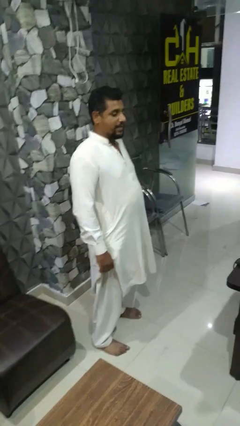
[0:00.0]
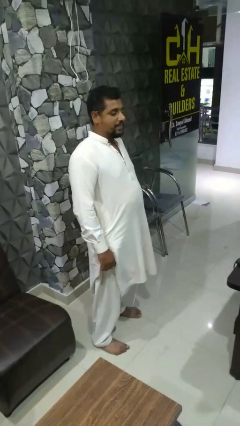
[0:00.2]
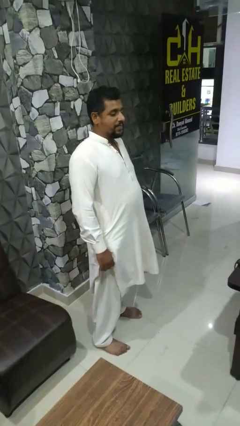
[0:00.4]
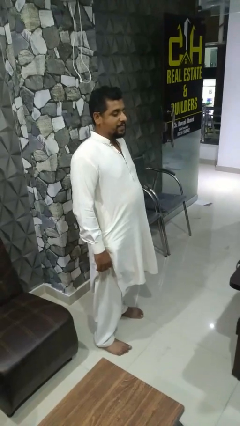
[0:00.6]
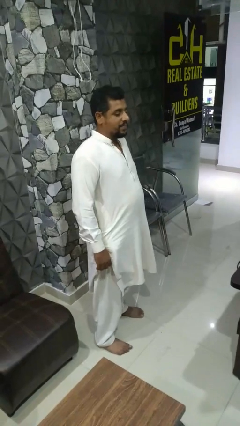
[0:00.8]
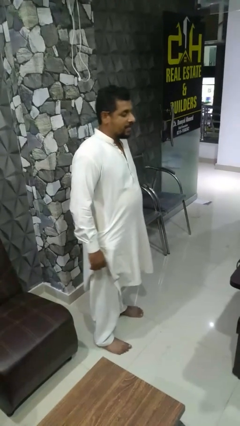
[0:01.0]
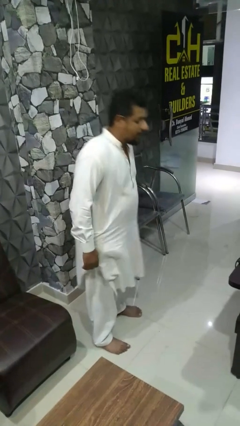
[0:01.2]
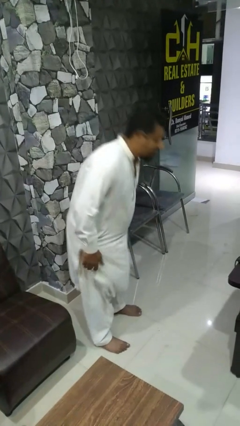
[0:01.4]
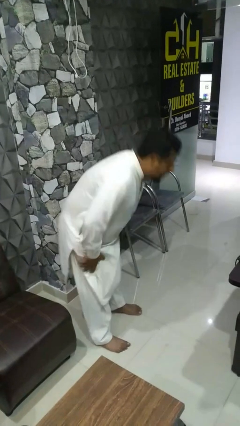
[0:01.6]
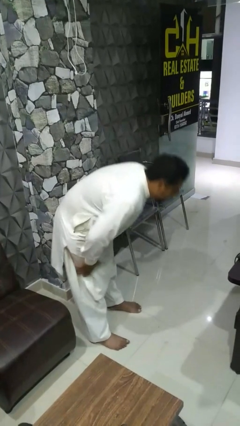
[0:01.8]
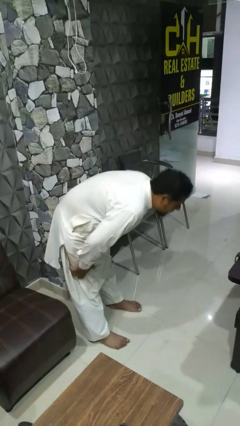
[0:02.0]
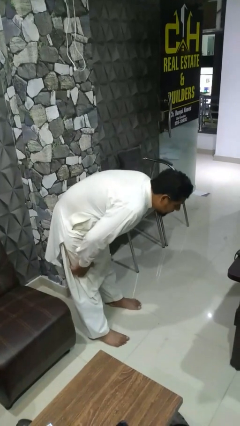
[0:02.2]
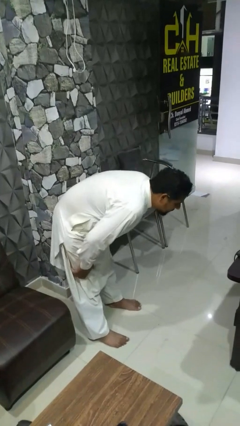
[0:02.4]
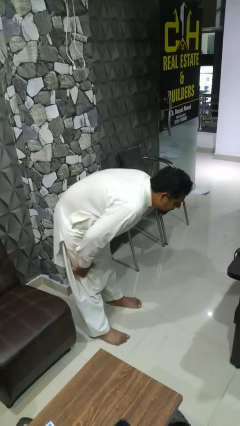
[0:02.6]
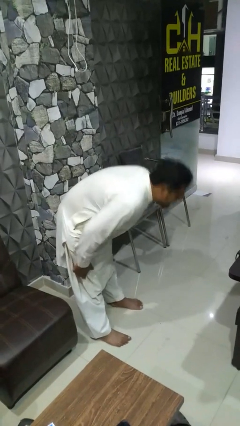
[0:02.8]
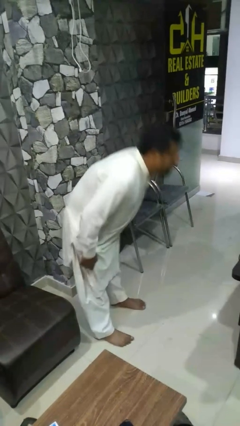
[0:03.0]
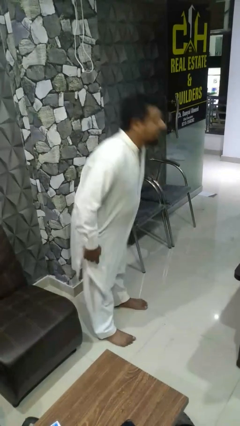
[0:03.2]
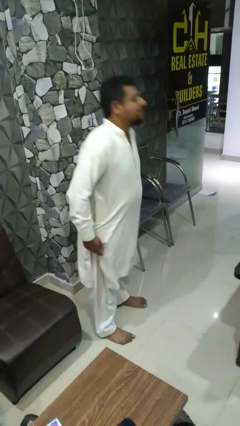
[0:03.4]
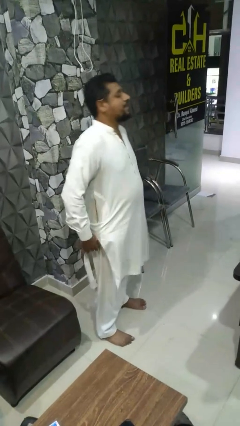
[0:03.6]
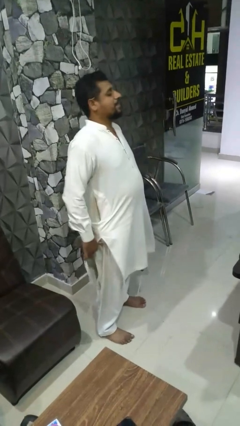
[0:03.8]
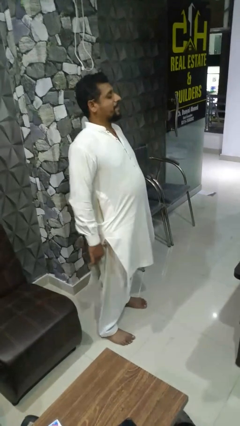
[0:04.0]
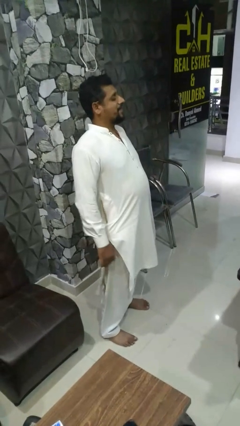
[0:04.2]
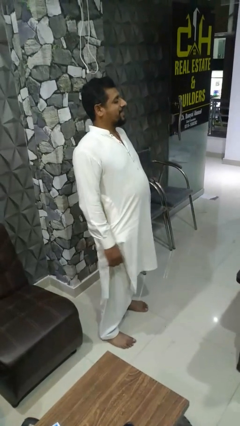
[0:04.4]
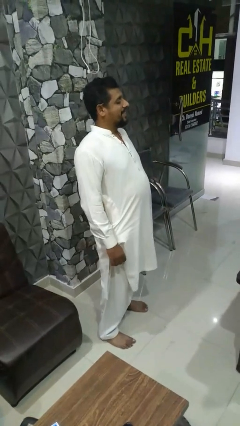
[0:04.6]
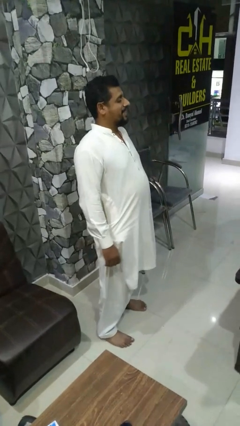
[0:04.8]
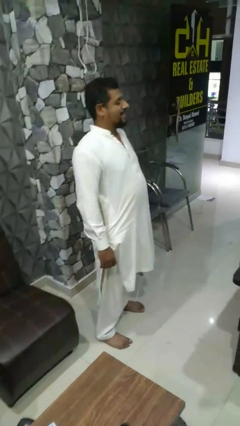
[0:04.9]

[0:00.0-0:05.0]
person bows

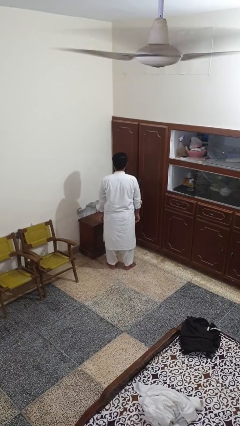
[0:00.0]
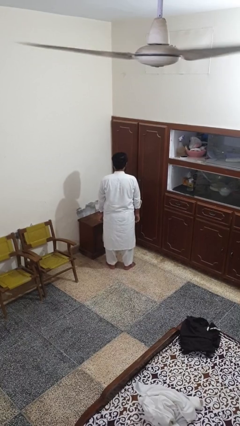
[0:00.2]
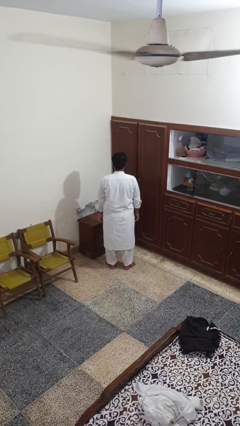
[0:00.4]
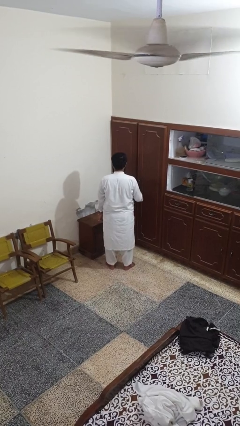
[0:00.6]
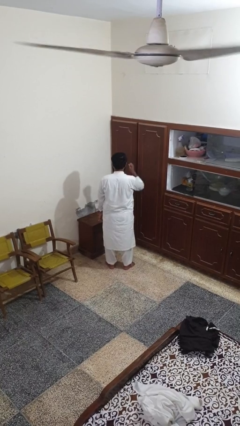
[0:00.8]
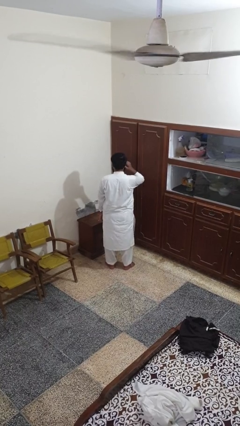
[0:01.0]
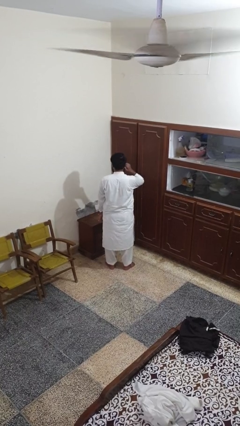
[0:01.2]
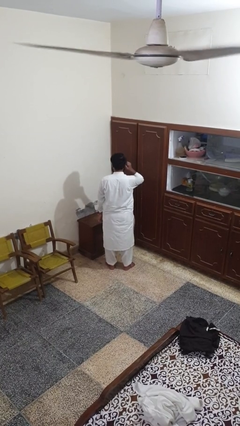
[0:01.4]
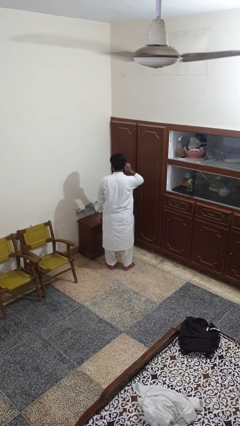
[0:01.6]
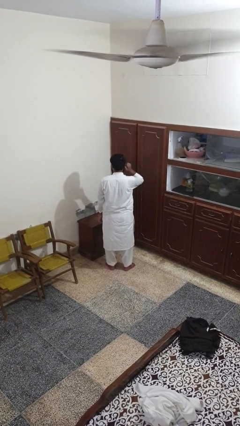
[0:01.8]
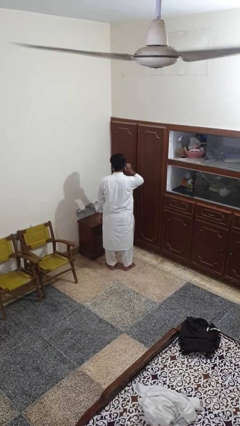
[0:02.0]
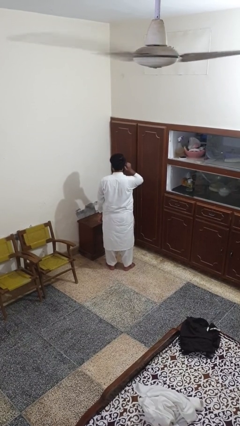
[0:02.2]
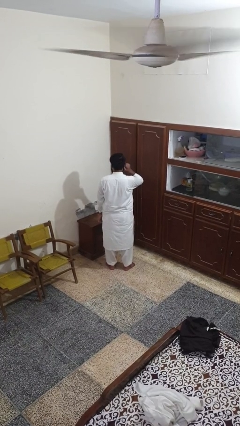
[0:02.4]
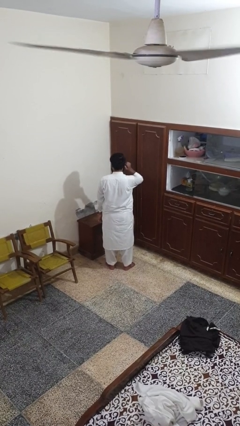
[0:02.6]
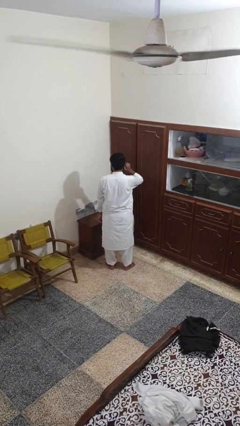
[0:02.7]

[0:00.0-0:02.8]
person touches earlobe

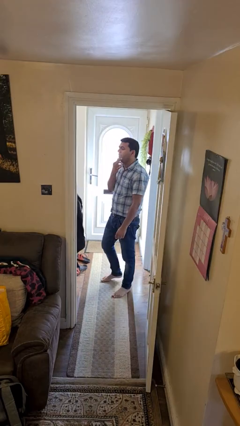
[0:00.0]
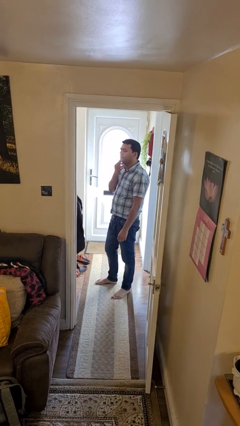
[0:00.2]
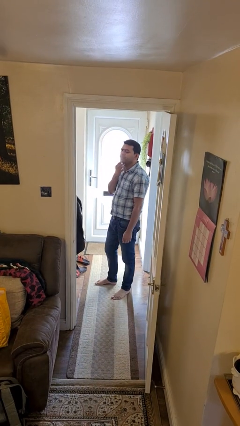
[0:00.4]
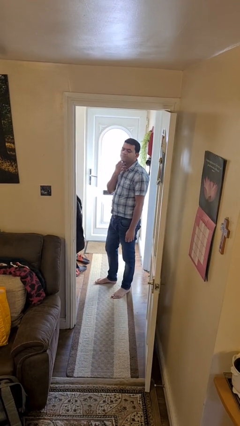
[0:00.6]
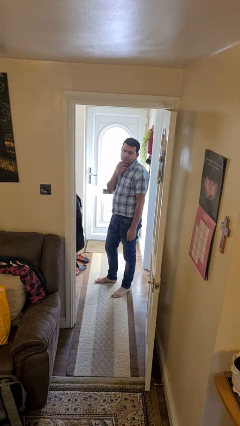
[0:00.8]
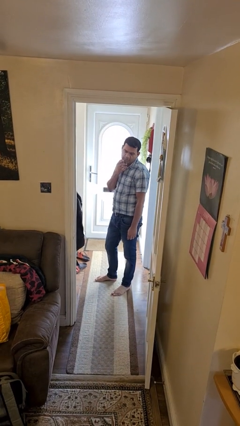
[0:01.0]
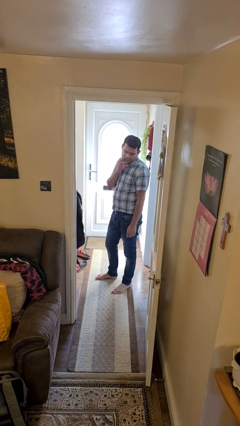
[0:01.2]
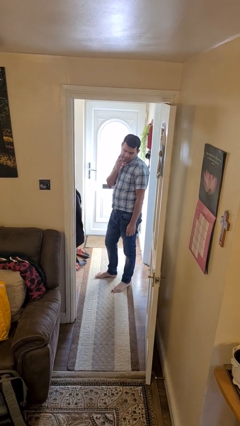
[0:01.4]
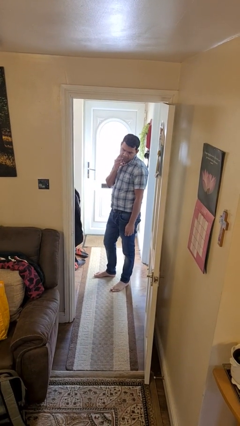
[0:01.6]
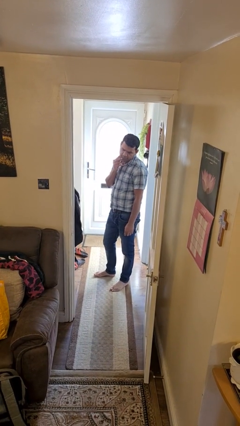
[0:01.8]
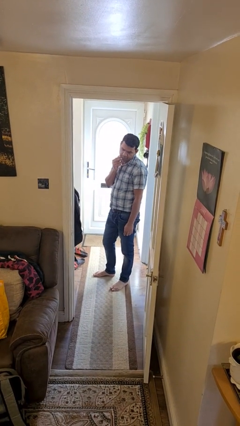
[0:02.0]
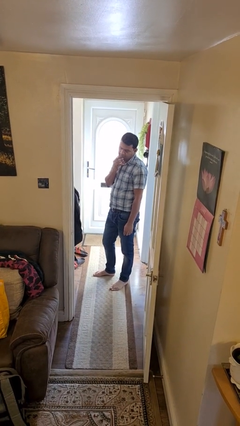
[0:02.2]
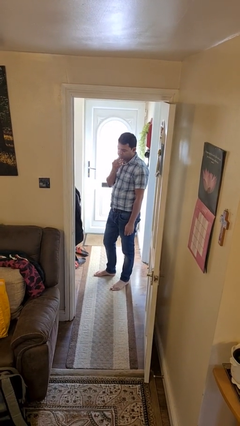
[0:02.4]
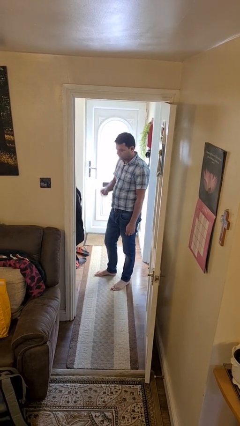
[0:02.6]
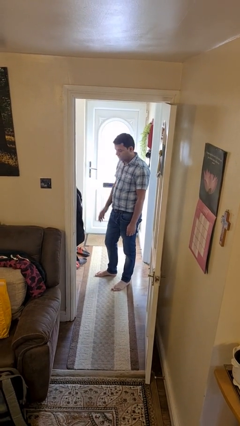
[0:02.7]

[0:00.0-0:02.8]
person strokes chin

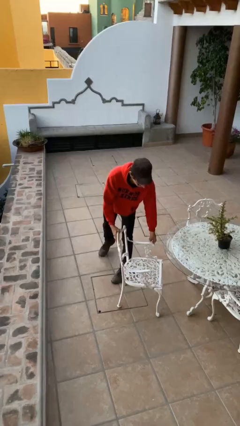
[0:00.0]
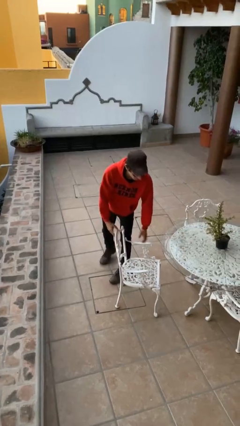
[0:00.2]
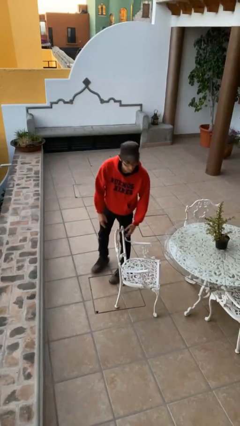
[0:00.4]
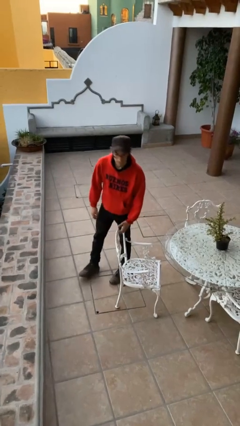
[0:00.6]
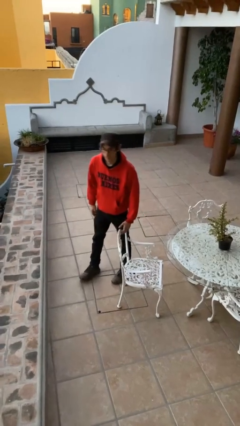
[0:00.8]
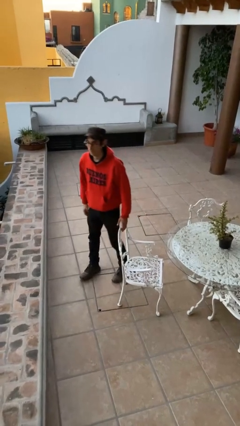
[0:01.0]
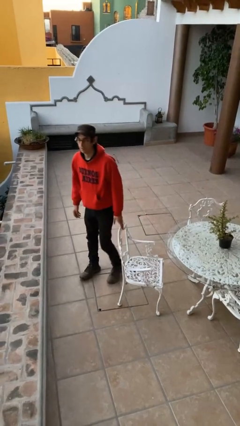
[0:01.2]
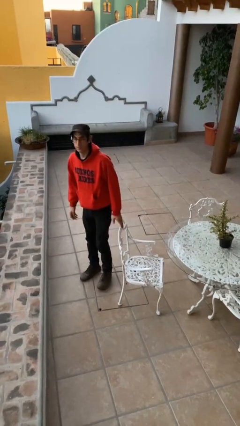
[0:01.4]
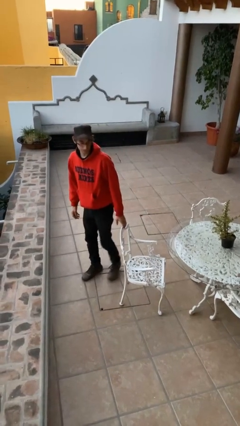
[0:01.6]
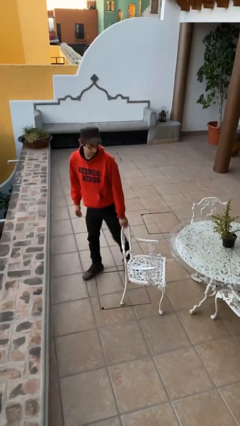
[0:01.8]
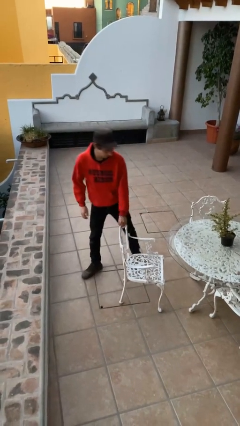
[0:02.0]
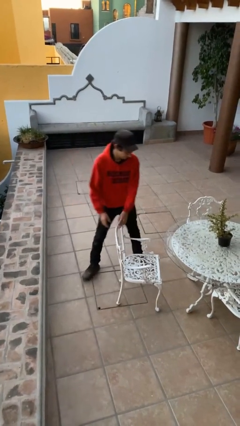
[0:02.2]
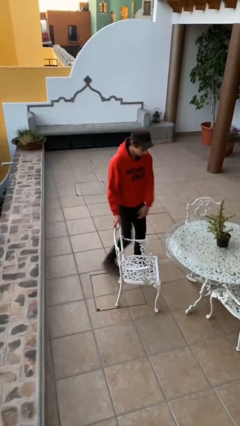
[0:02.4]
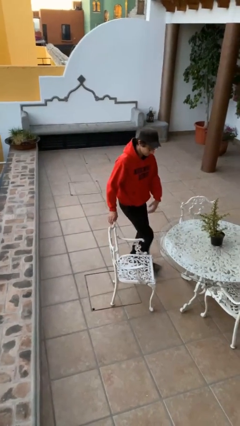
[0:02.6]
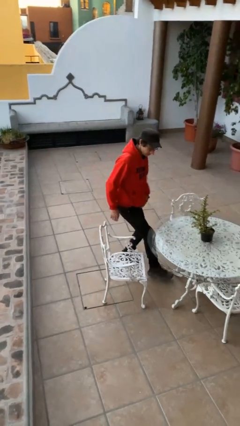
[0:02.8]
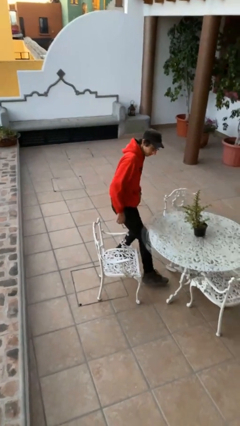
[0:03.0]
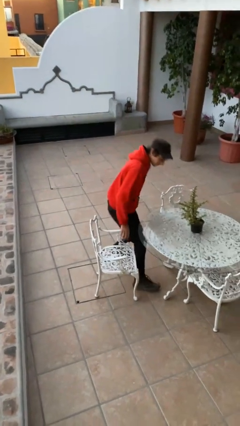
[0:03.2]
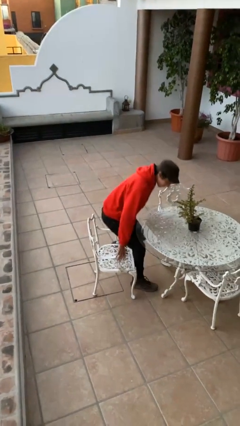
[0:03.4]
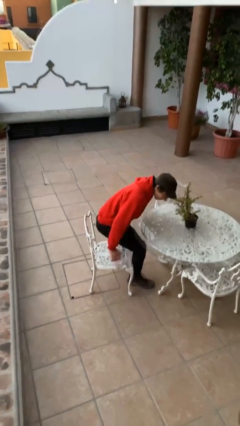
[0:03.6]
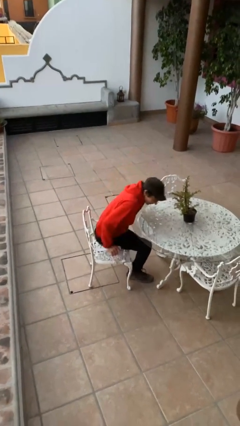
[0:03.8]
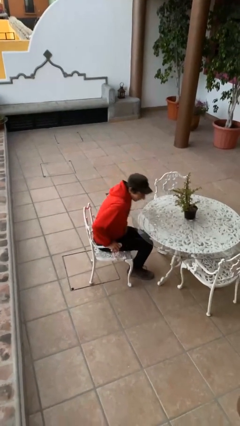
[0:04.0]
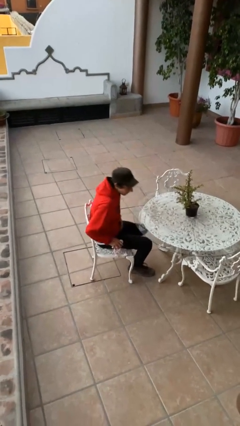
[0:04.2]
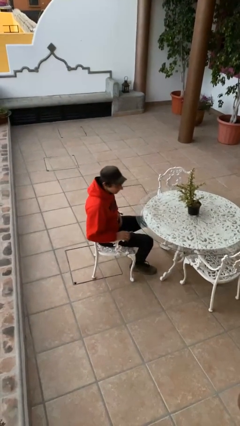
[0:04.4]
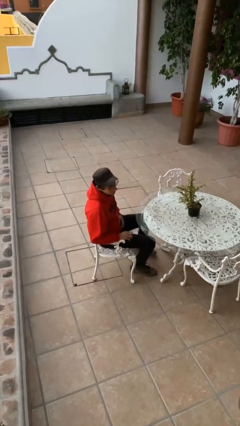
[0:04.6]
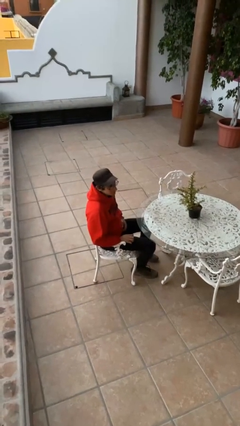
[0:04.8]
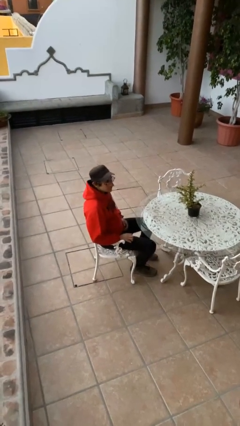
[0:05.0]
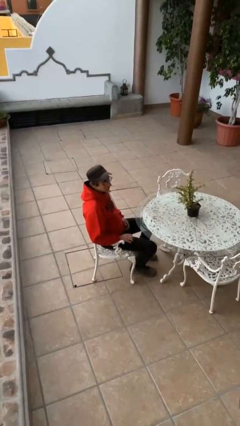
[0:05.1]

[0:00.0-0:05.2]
person sits down

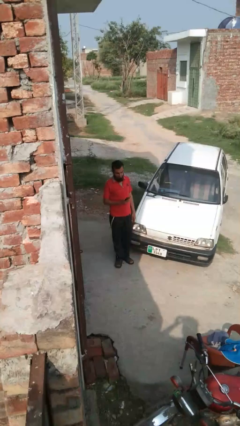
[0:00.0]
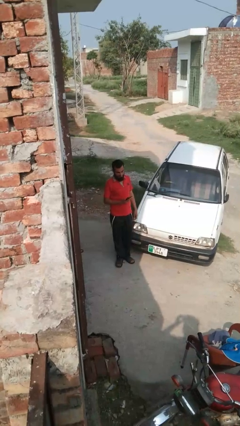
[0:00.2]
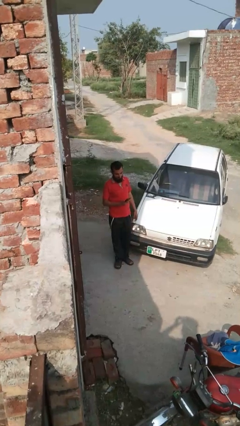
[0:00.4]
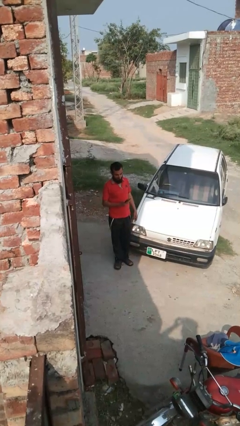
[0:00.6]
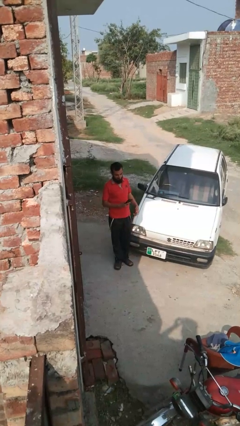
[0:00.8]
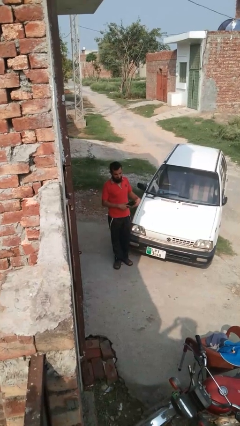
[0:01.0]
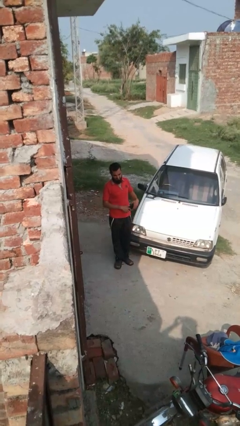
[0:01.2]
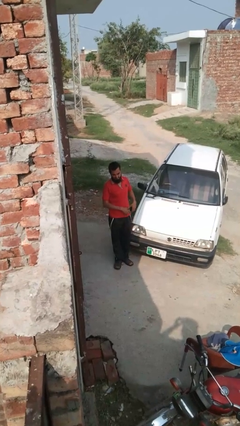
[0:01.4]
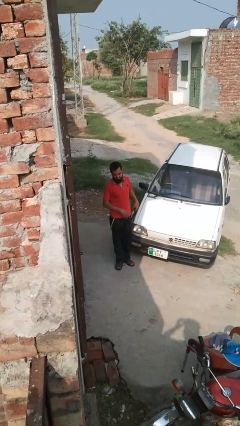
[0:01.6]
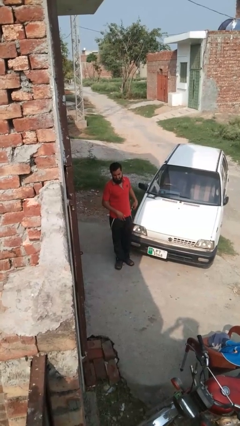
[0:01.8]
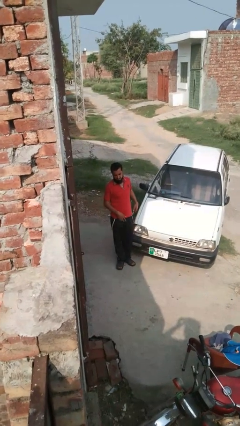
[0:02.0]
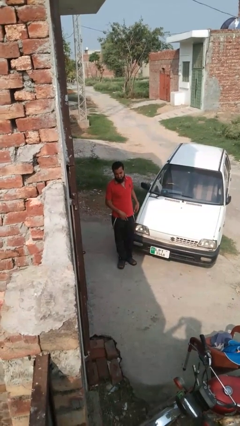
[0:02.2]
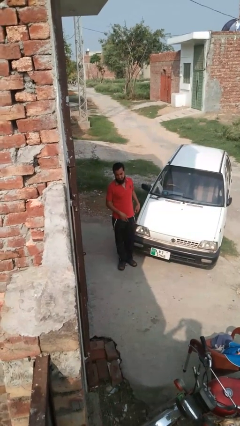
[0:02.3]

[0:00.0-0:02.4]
person puts phone into pocket
